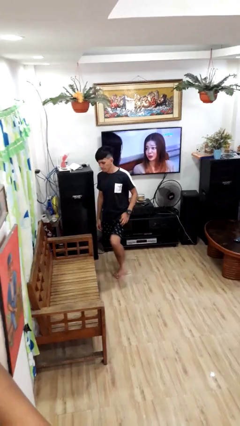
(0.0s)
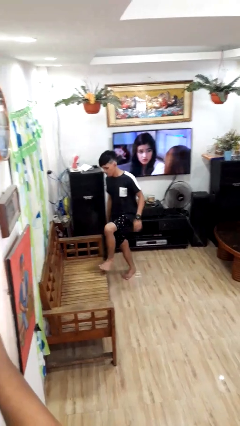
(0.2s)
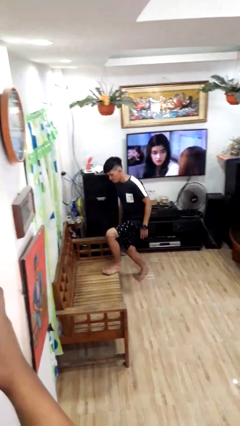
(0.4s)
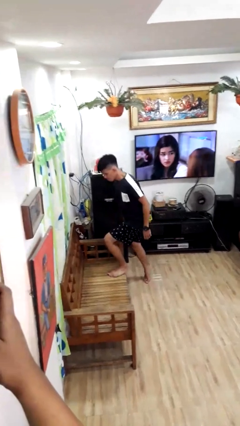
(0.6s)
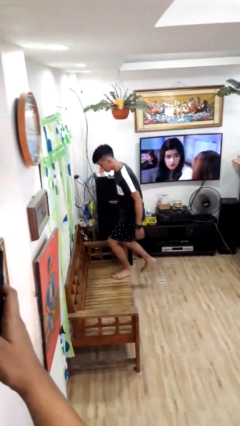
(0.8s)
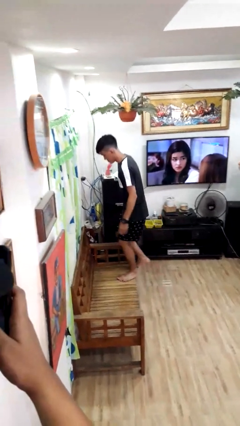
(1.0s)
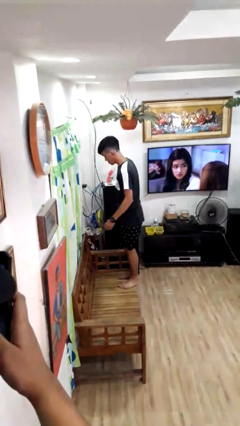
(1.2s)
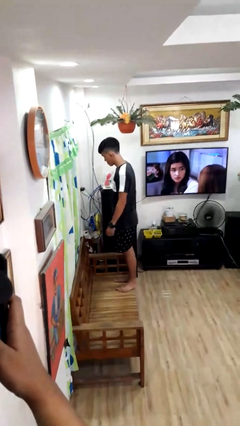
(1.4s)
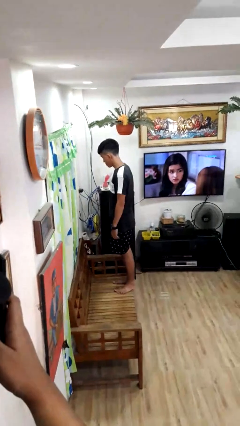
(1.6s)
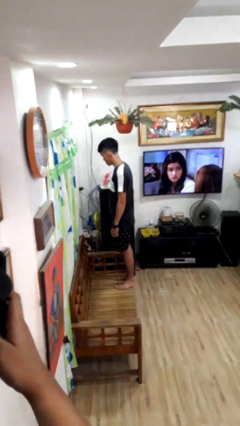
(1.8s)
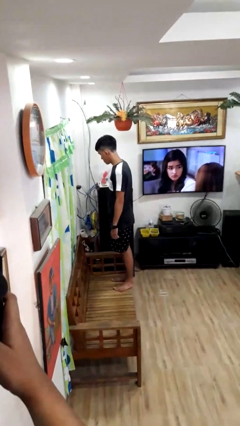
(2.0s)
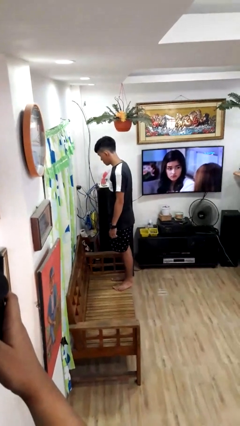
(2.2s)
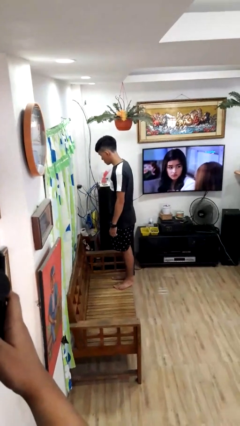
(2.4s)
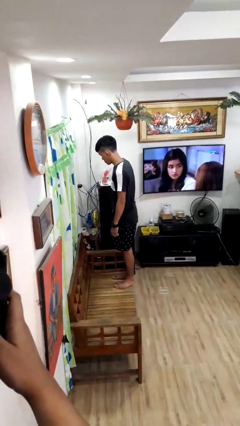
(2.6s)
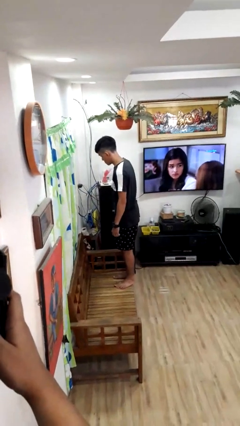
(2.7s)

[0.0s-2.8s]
person climbs on couch

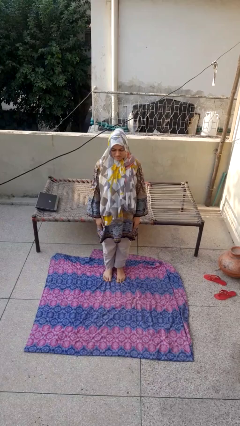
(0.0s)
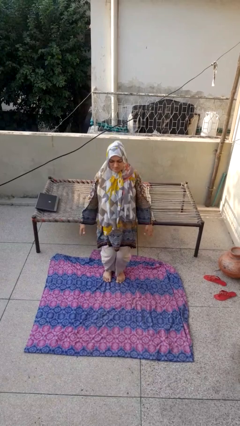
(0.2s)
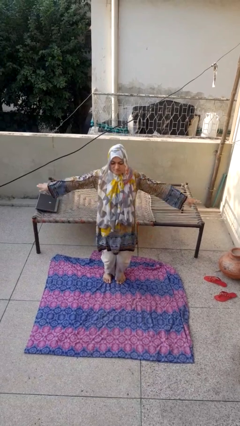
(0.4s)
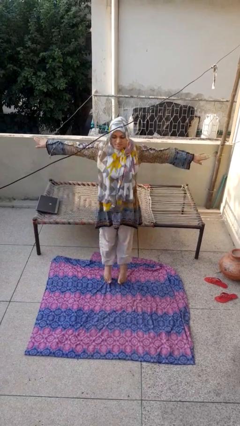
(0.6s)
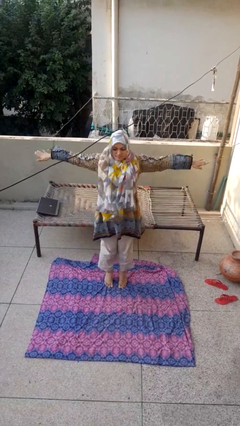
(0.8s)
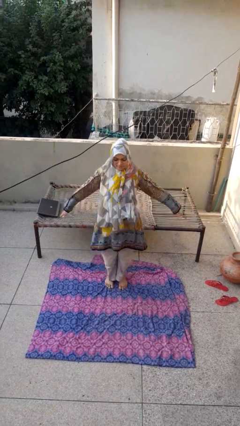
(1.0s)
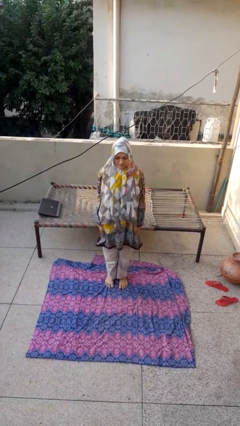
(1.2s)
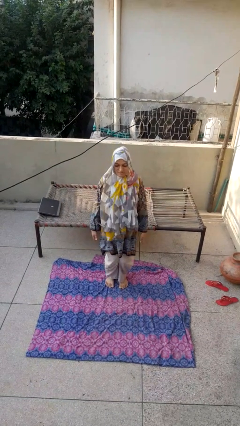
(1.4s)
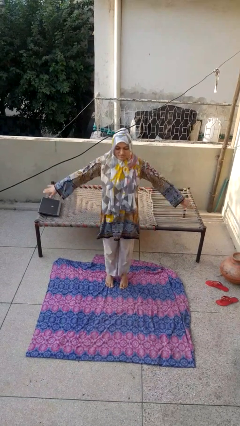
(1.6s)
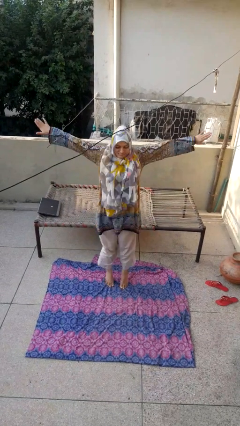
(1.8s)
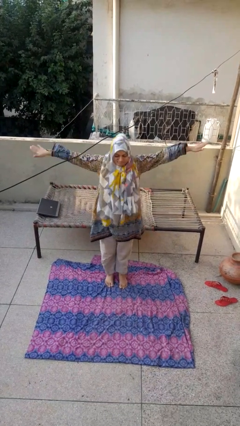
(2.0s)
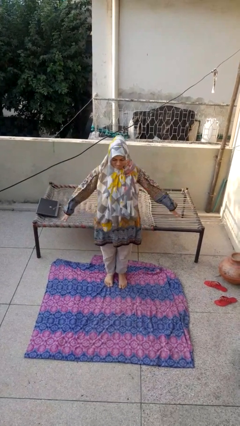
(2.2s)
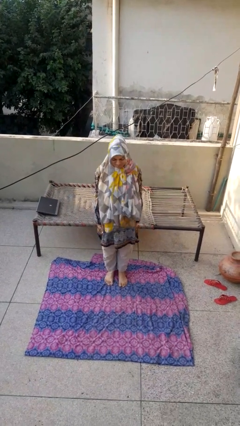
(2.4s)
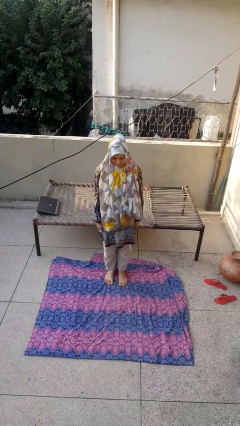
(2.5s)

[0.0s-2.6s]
person exercises with jumping jacks

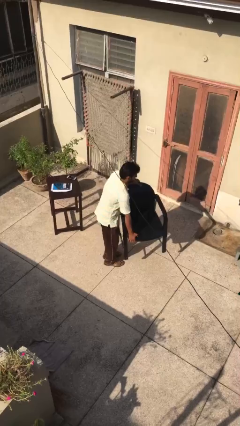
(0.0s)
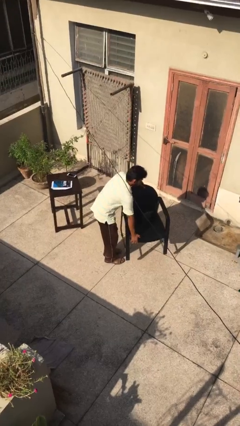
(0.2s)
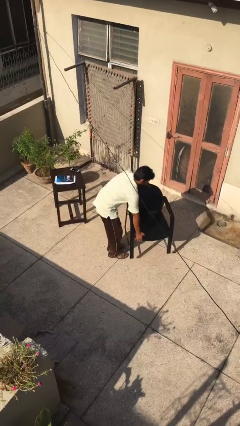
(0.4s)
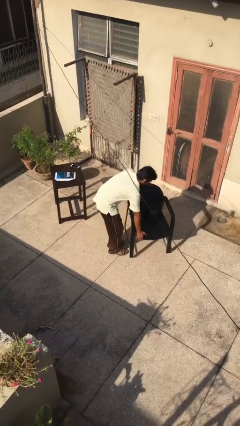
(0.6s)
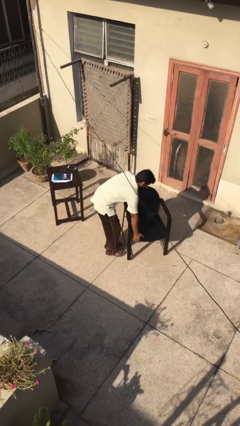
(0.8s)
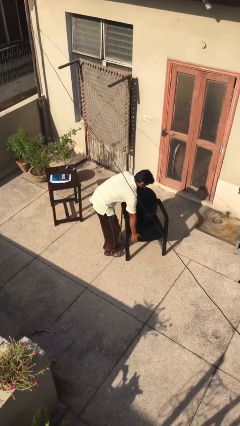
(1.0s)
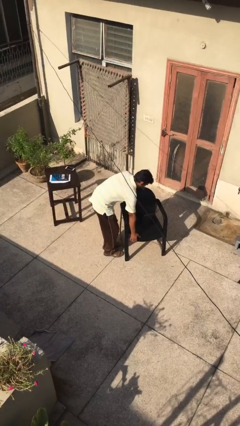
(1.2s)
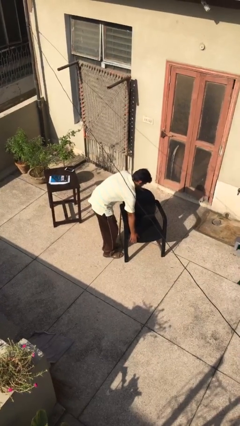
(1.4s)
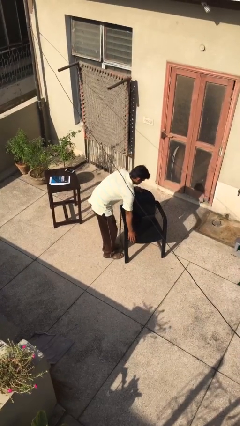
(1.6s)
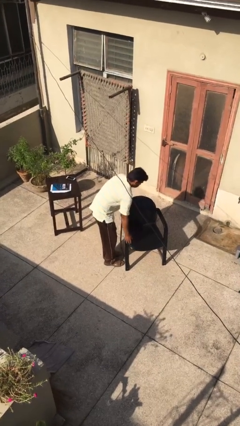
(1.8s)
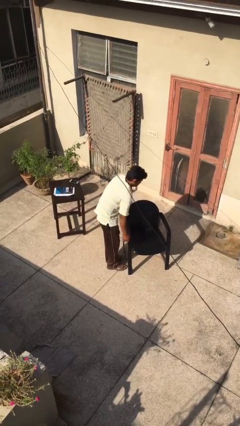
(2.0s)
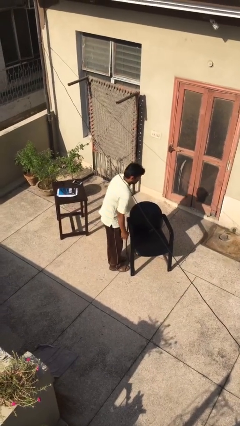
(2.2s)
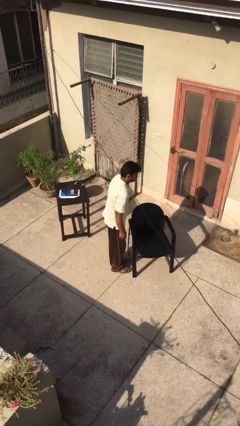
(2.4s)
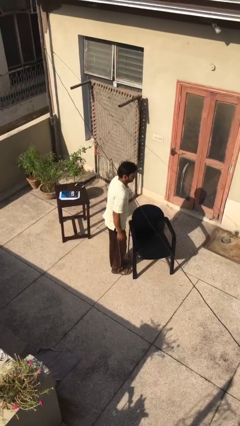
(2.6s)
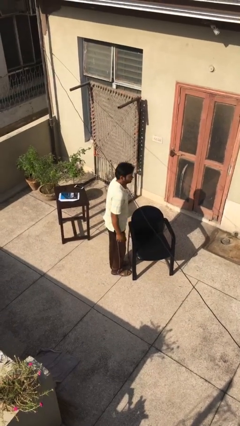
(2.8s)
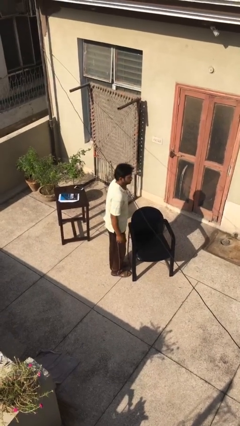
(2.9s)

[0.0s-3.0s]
person puts down object on floor

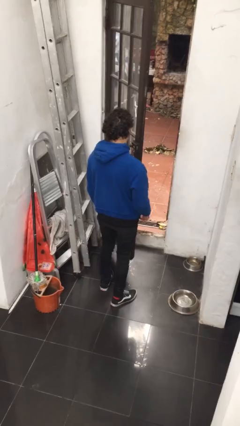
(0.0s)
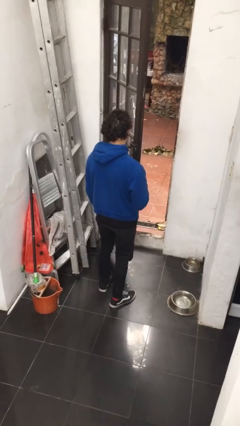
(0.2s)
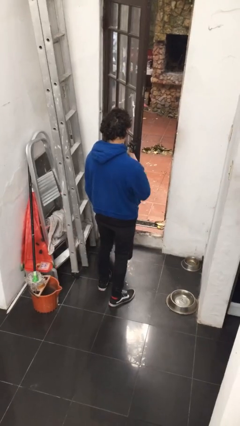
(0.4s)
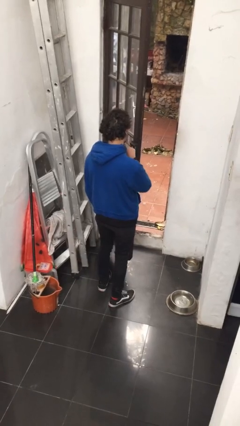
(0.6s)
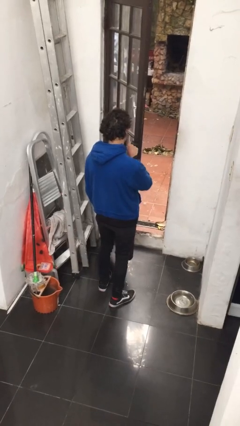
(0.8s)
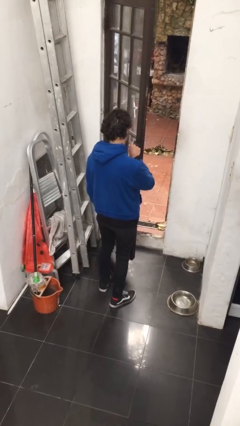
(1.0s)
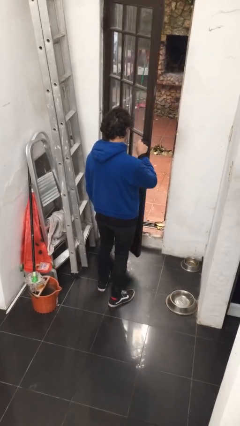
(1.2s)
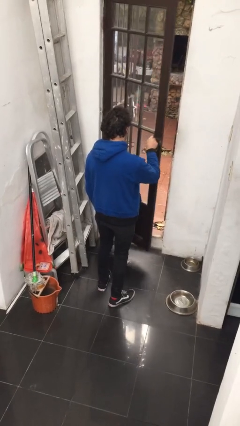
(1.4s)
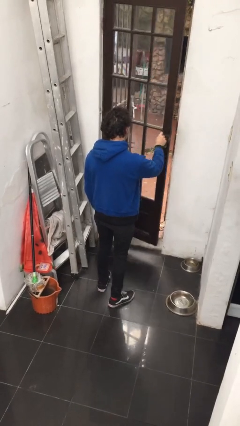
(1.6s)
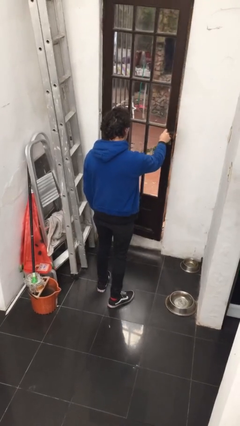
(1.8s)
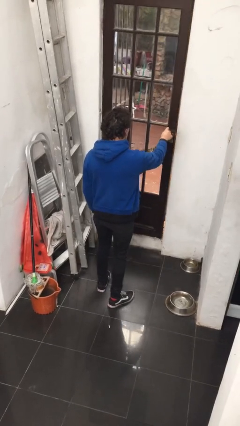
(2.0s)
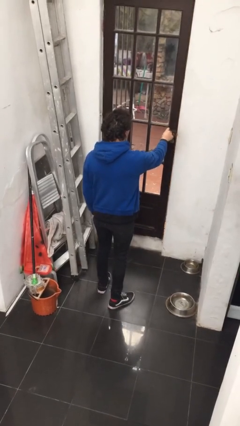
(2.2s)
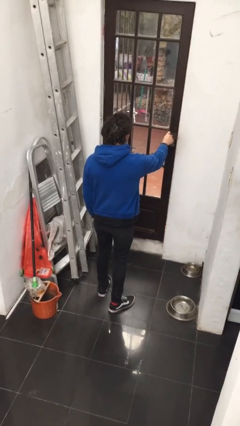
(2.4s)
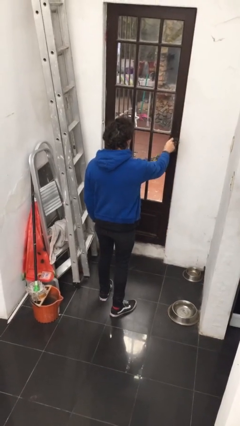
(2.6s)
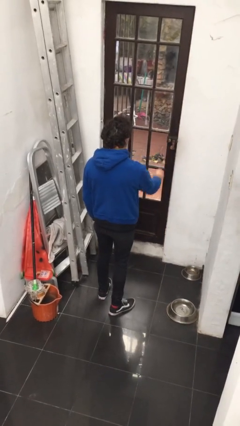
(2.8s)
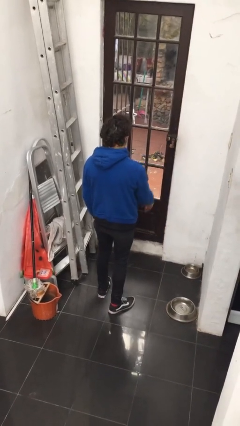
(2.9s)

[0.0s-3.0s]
person closes facility door

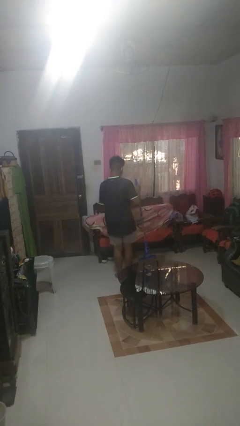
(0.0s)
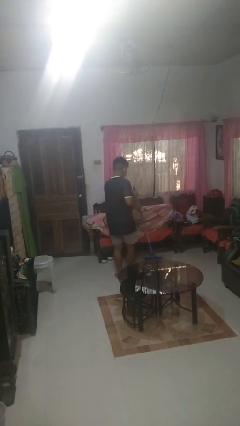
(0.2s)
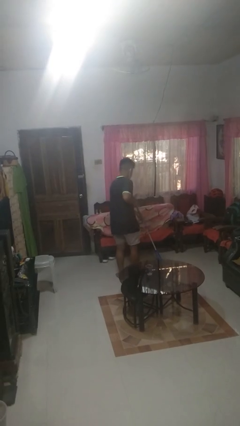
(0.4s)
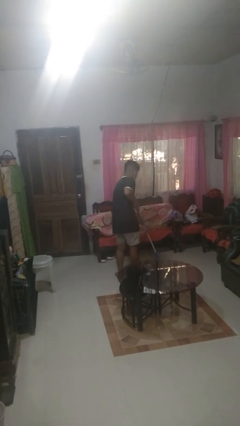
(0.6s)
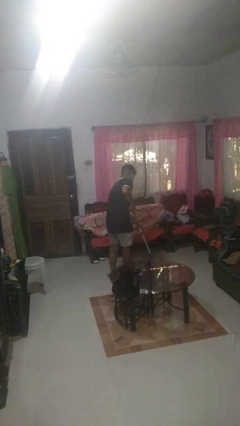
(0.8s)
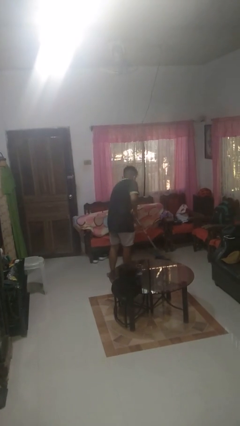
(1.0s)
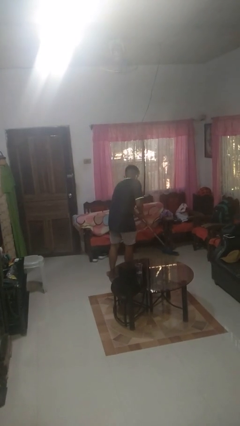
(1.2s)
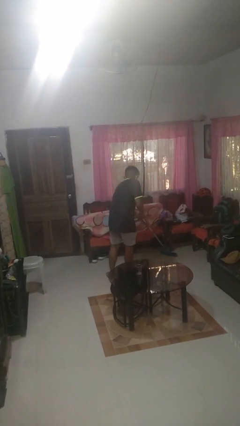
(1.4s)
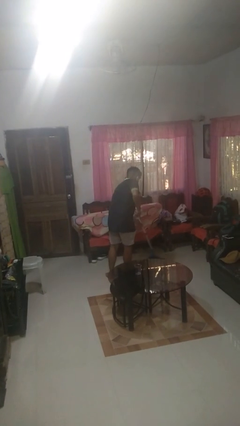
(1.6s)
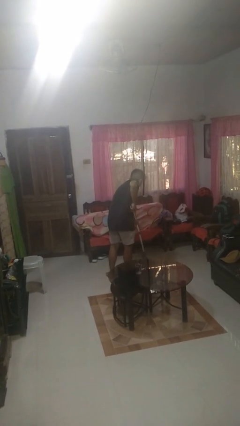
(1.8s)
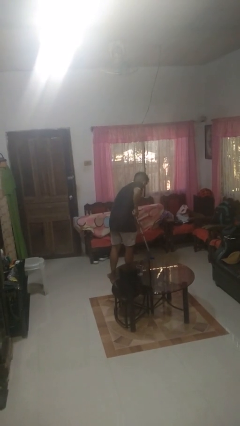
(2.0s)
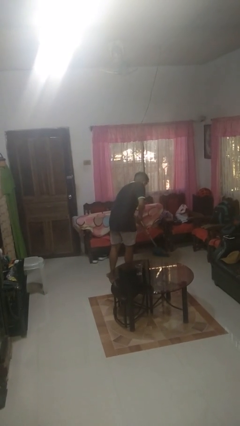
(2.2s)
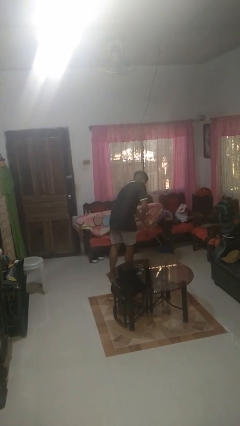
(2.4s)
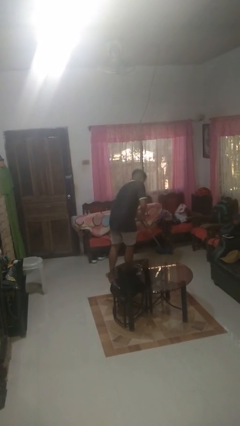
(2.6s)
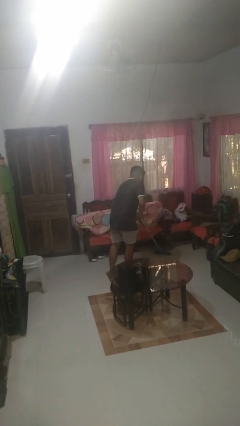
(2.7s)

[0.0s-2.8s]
person mops

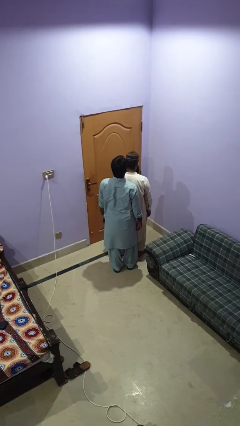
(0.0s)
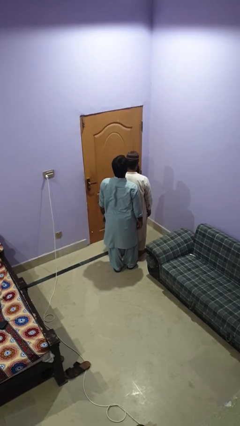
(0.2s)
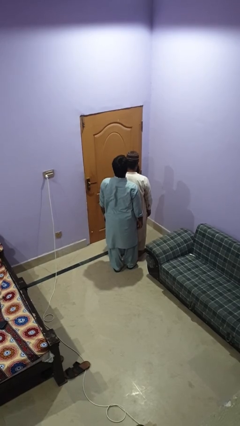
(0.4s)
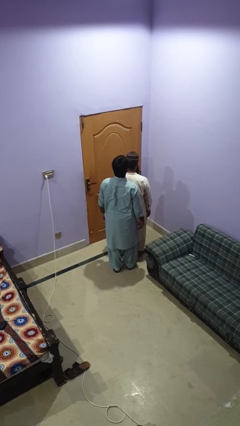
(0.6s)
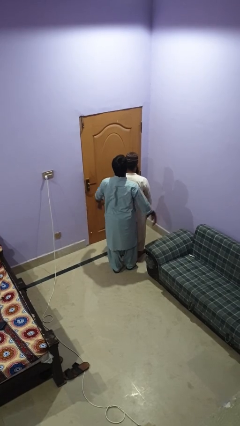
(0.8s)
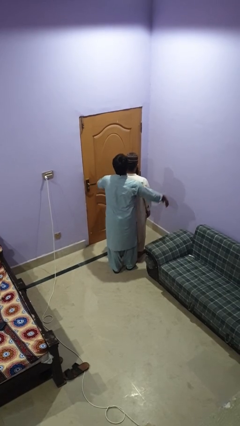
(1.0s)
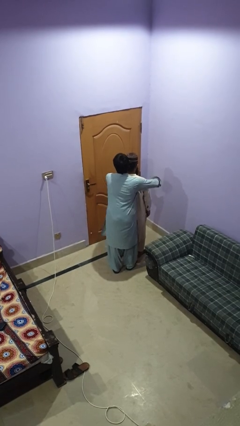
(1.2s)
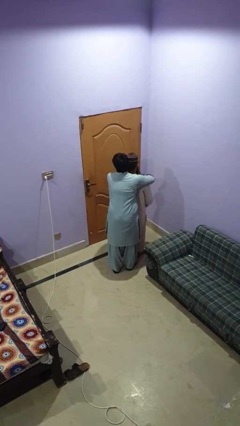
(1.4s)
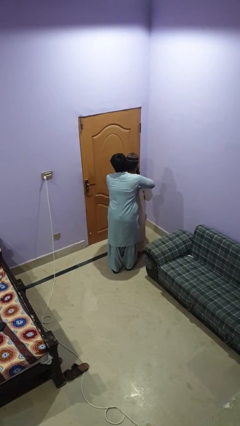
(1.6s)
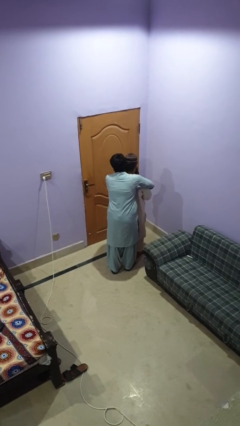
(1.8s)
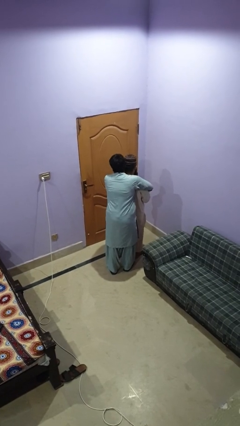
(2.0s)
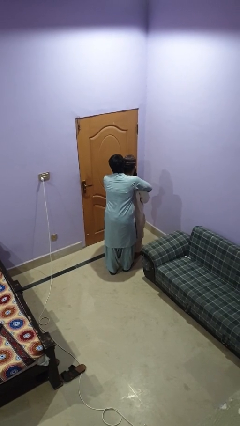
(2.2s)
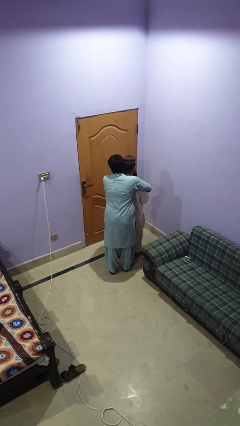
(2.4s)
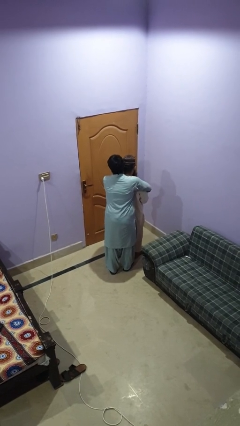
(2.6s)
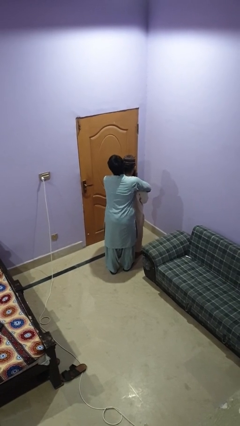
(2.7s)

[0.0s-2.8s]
person hugs person from behind
